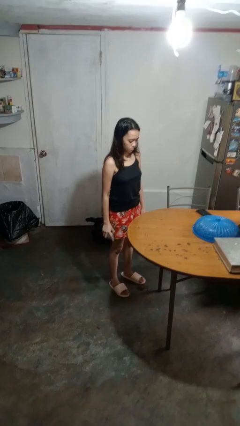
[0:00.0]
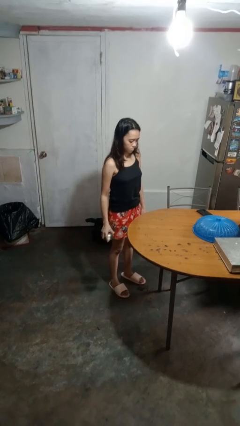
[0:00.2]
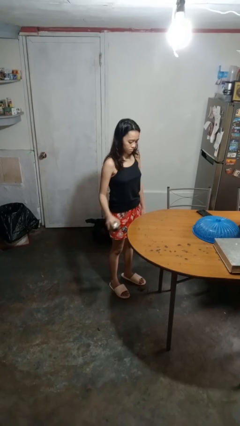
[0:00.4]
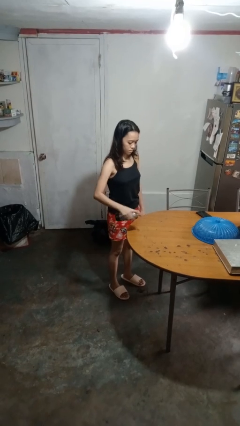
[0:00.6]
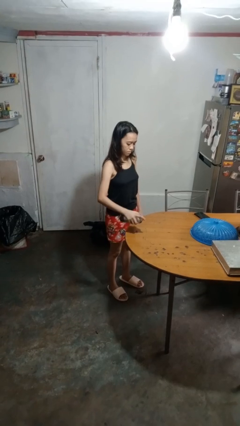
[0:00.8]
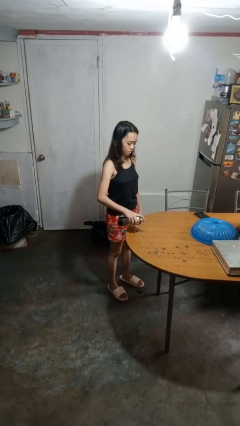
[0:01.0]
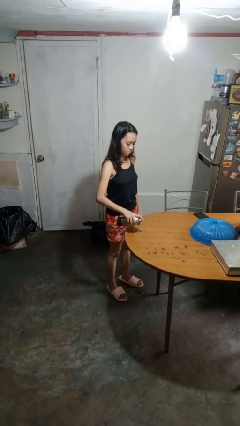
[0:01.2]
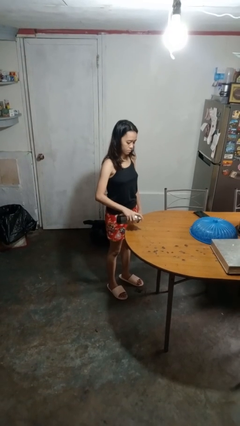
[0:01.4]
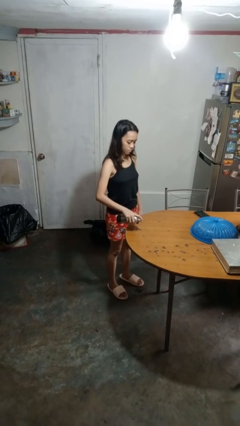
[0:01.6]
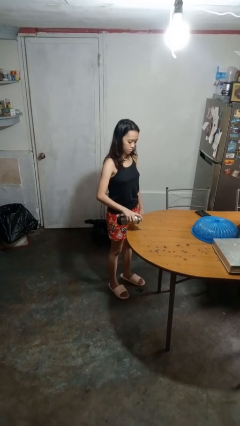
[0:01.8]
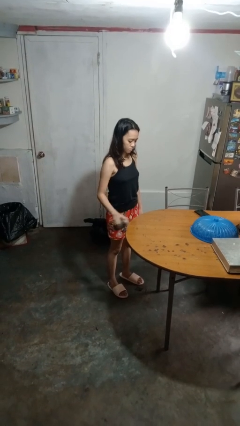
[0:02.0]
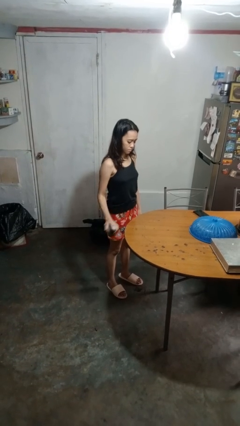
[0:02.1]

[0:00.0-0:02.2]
person sprays from bottle

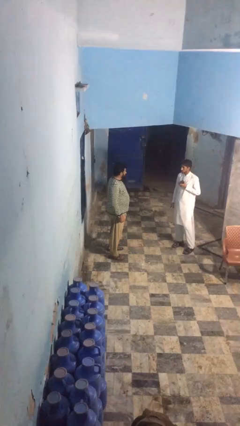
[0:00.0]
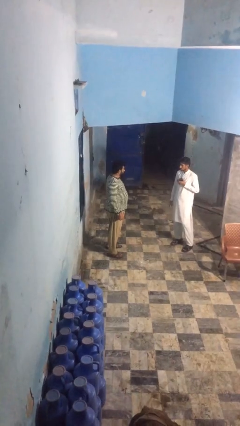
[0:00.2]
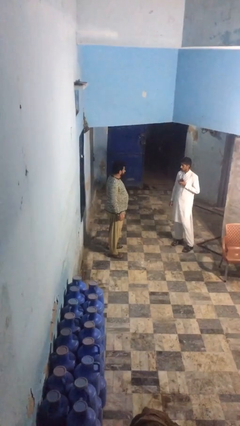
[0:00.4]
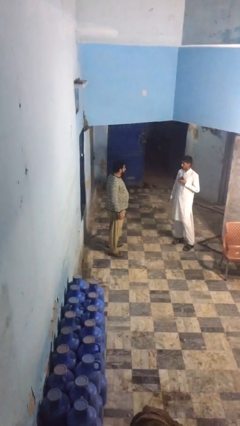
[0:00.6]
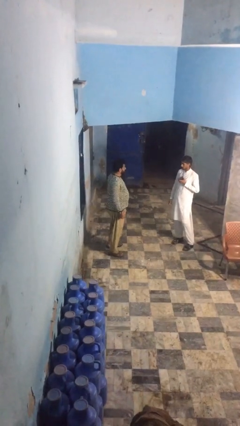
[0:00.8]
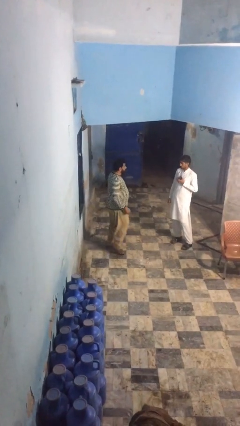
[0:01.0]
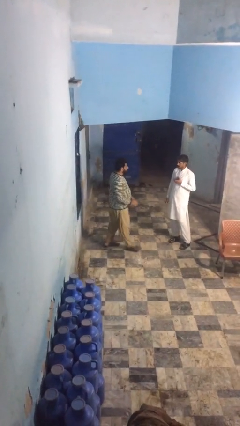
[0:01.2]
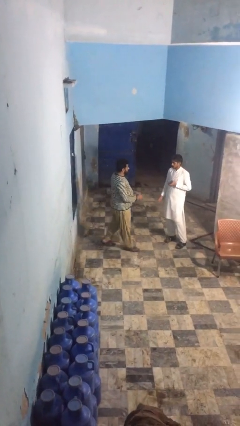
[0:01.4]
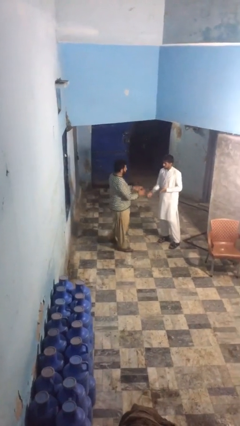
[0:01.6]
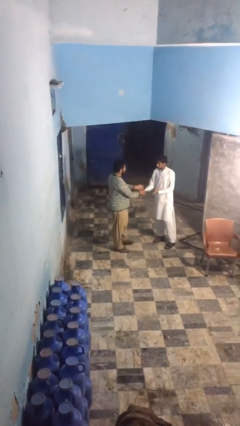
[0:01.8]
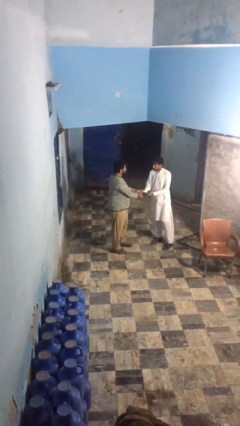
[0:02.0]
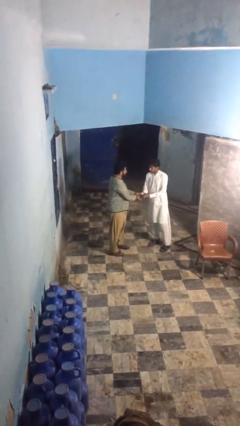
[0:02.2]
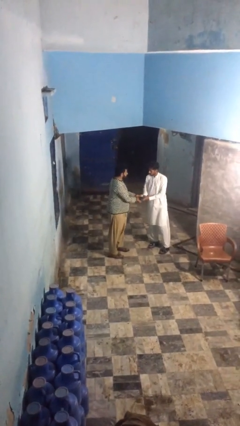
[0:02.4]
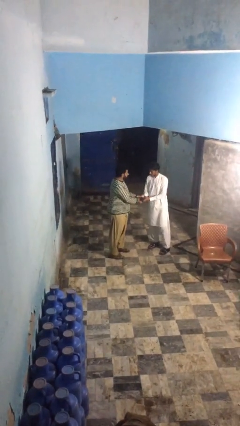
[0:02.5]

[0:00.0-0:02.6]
person shakes hand

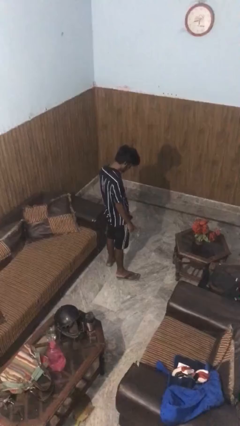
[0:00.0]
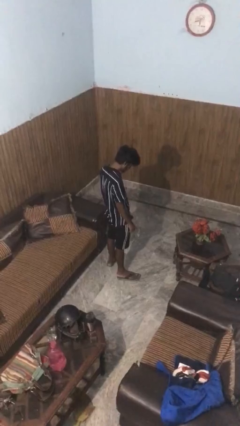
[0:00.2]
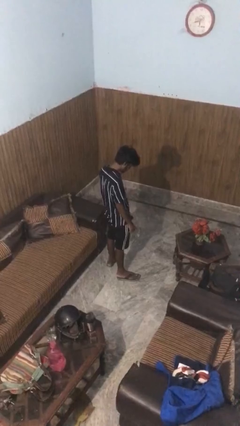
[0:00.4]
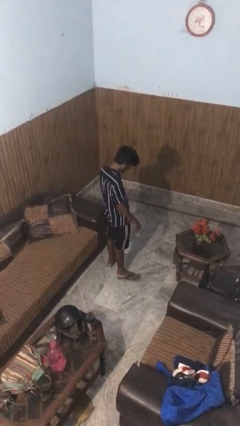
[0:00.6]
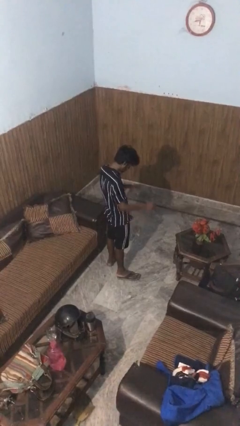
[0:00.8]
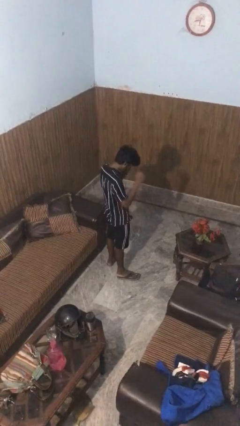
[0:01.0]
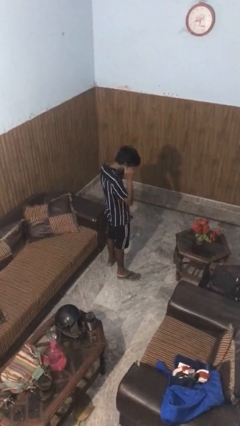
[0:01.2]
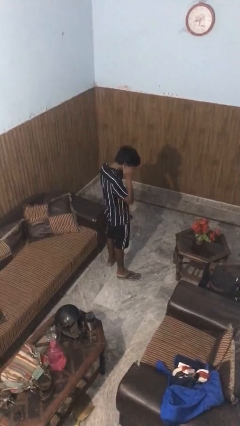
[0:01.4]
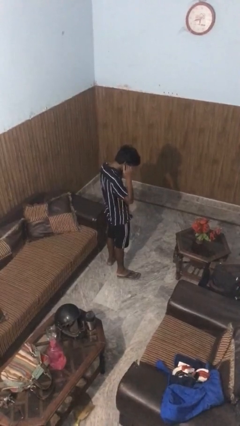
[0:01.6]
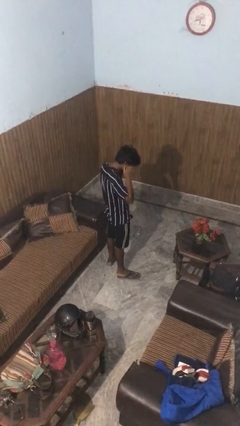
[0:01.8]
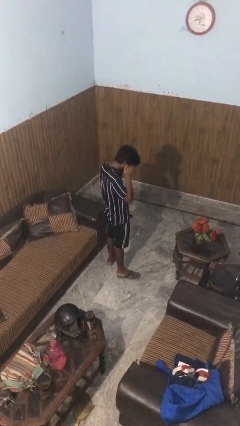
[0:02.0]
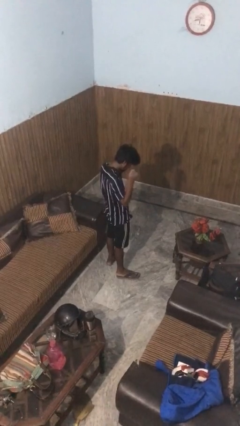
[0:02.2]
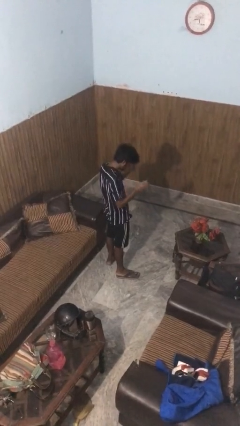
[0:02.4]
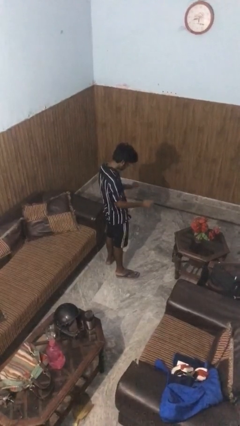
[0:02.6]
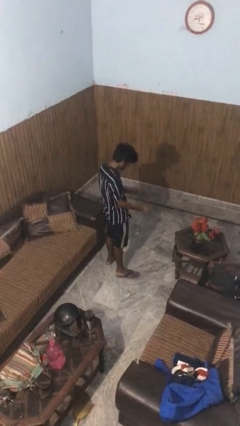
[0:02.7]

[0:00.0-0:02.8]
person takes off headphones

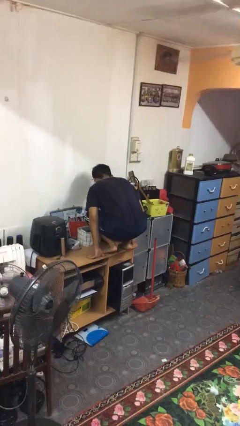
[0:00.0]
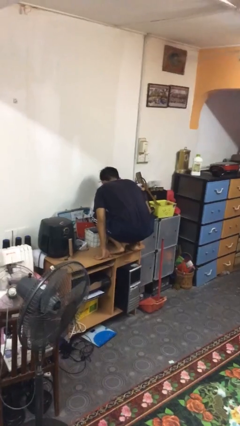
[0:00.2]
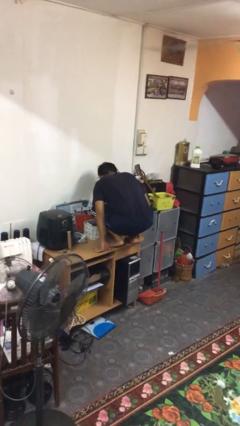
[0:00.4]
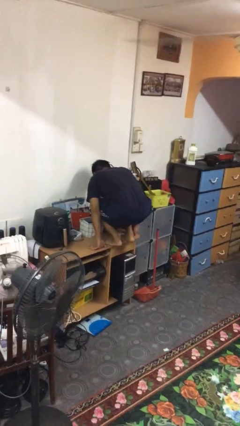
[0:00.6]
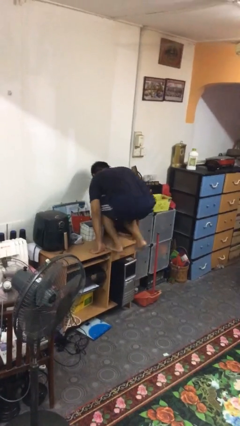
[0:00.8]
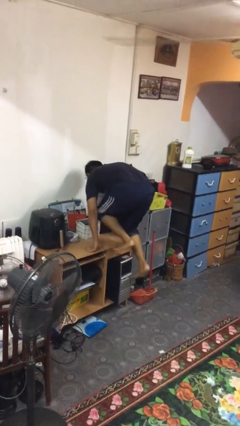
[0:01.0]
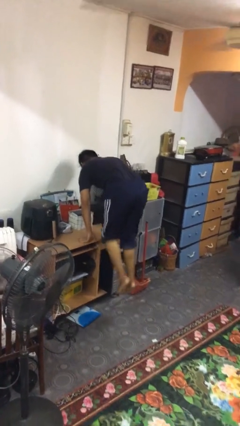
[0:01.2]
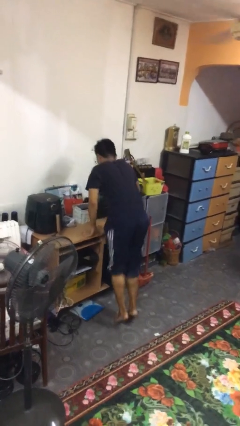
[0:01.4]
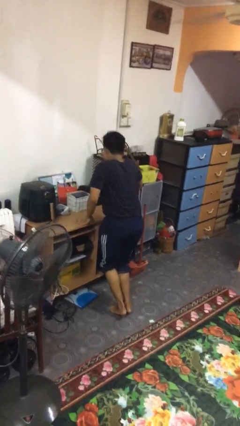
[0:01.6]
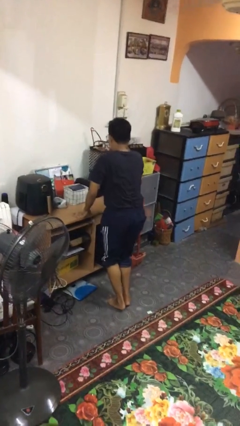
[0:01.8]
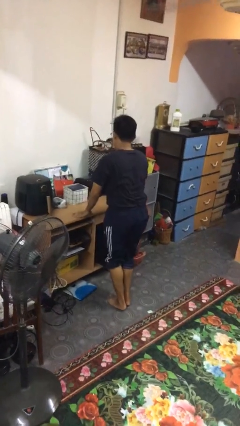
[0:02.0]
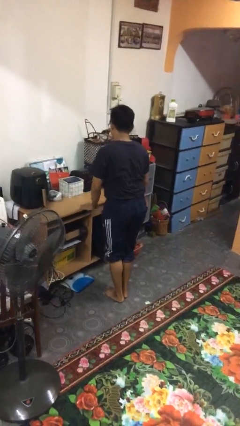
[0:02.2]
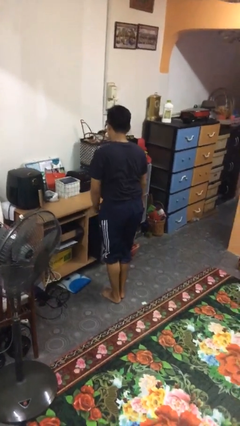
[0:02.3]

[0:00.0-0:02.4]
person climbs off table

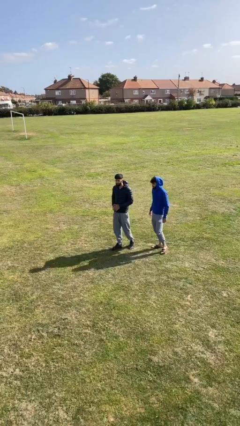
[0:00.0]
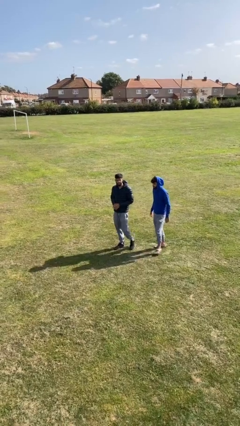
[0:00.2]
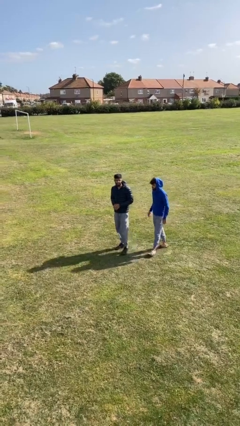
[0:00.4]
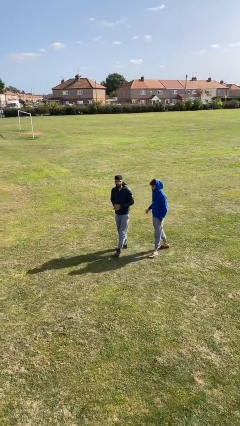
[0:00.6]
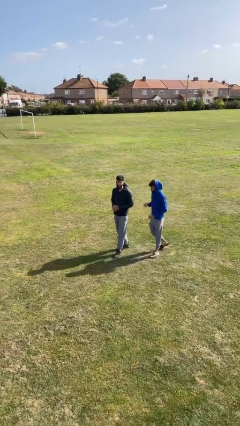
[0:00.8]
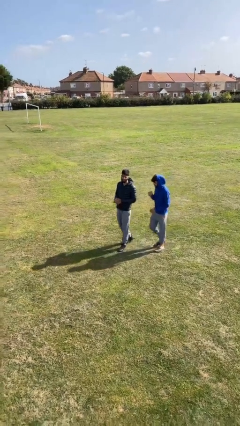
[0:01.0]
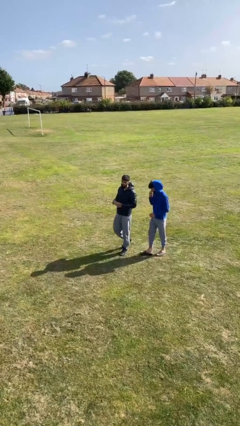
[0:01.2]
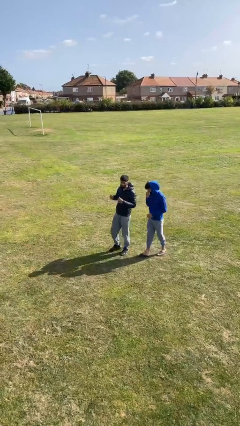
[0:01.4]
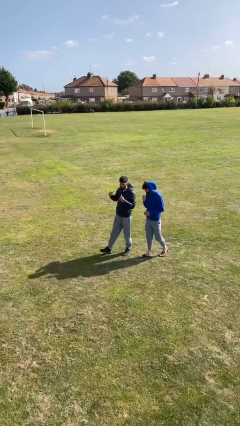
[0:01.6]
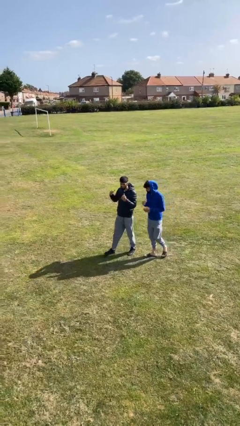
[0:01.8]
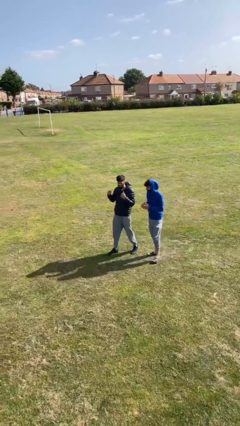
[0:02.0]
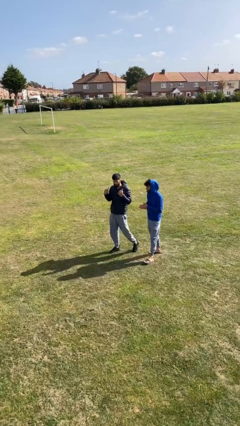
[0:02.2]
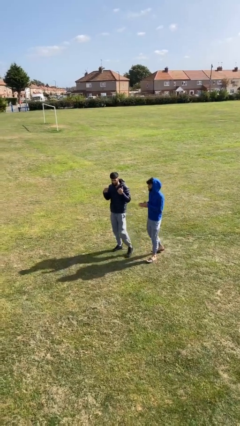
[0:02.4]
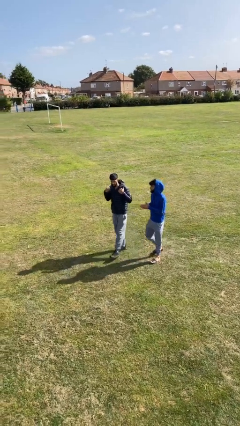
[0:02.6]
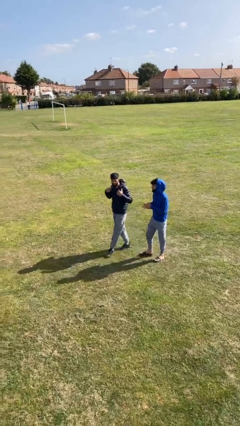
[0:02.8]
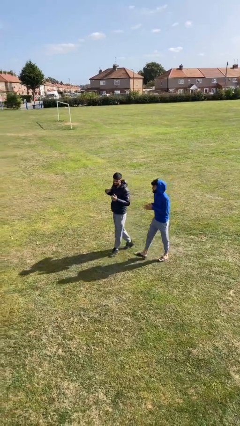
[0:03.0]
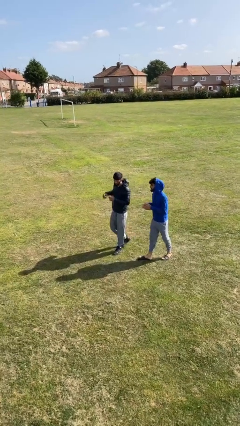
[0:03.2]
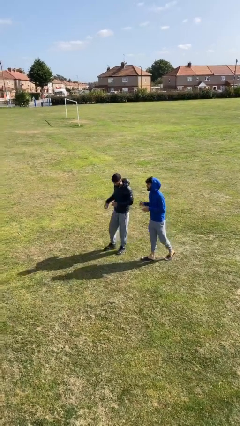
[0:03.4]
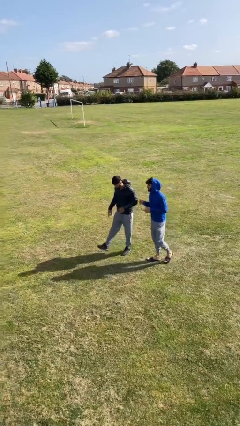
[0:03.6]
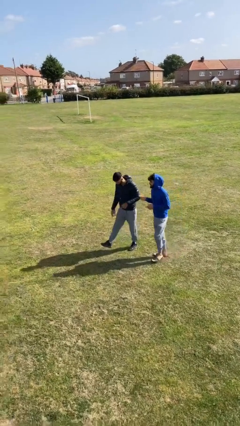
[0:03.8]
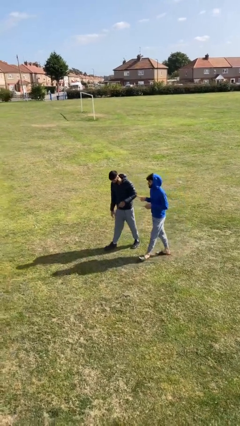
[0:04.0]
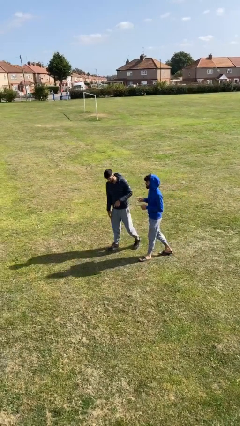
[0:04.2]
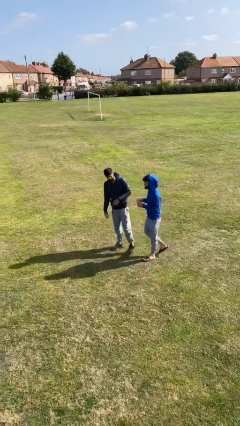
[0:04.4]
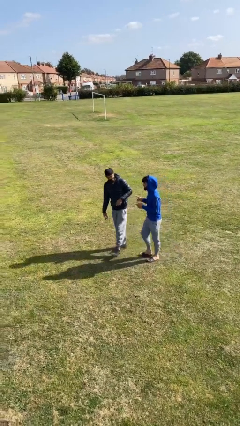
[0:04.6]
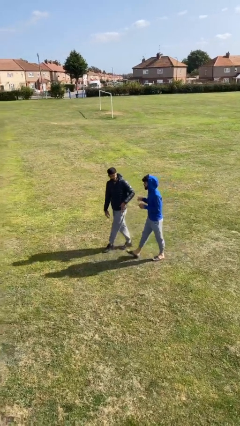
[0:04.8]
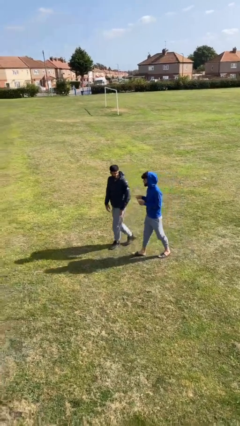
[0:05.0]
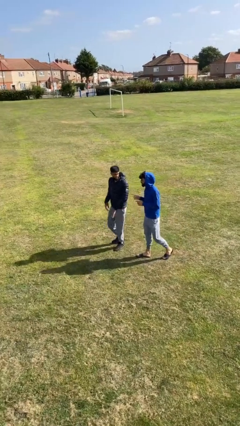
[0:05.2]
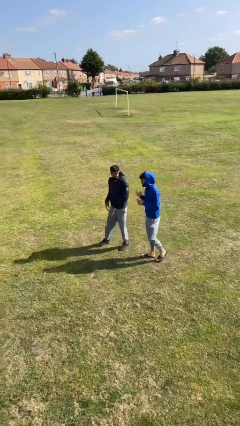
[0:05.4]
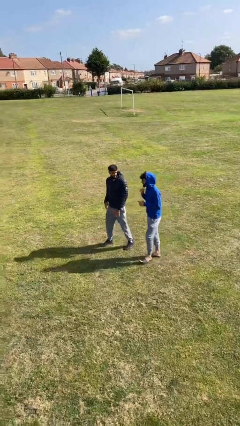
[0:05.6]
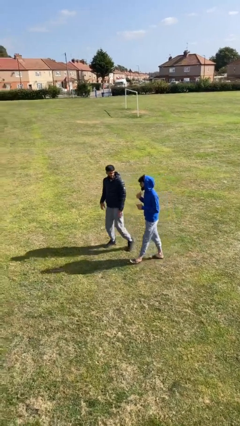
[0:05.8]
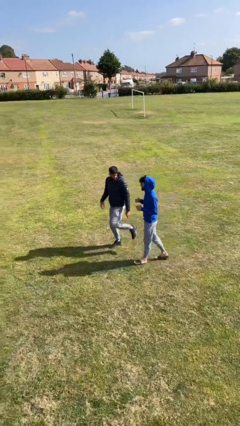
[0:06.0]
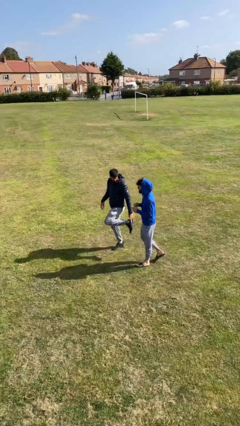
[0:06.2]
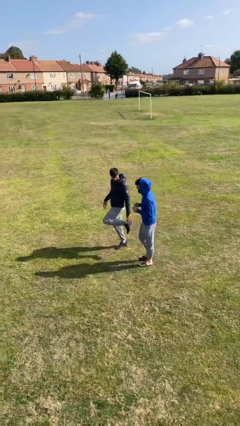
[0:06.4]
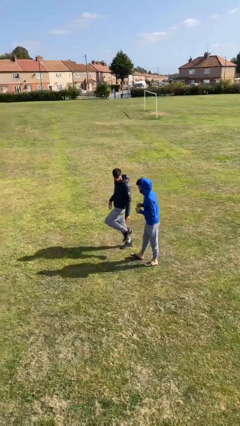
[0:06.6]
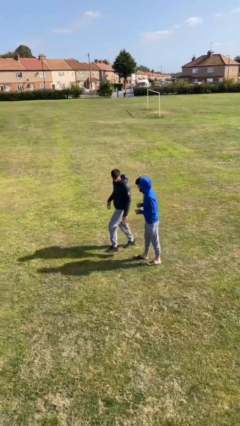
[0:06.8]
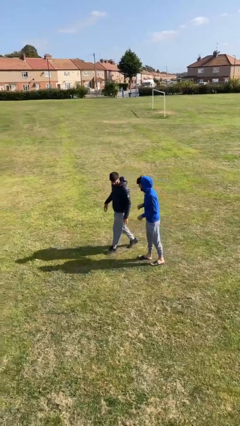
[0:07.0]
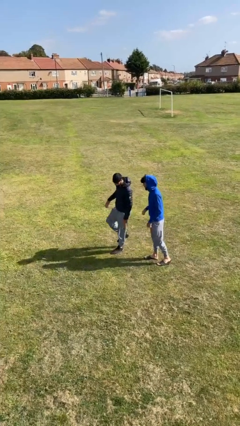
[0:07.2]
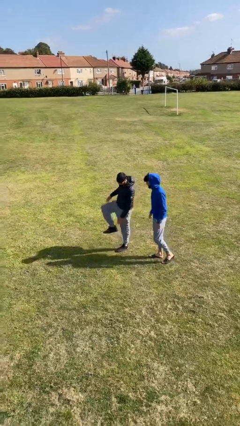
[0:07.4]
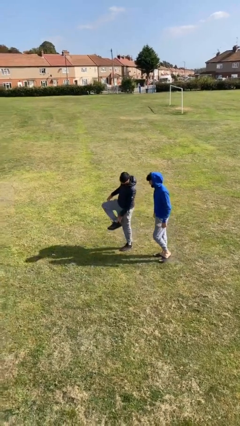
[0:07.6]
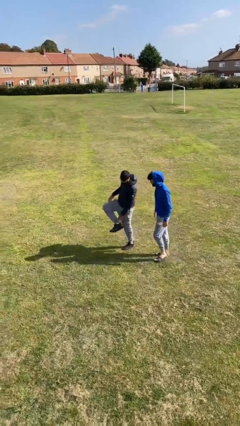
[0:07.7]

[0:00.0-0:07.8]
person talks to person

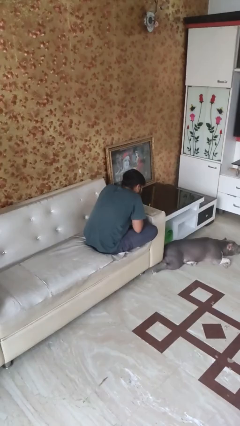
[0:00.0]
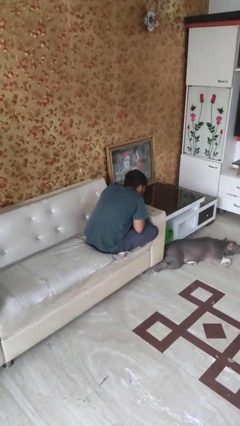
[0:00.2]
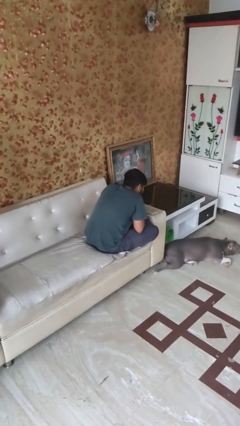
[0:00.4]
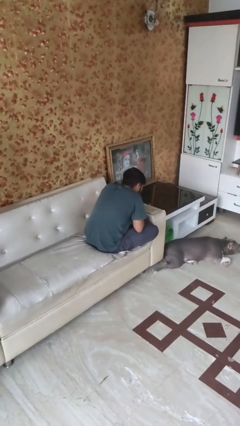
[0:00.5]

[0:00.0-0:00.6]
person extinguishes candle
